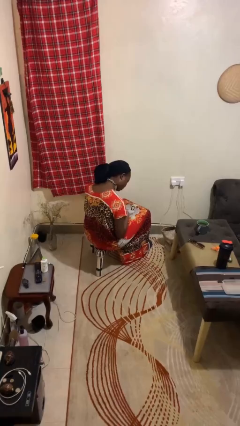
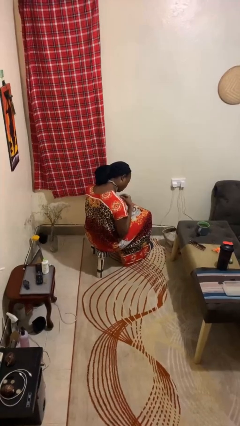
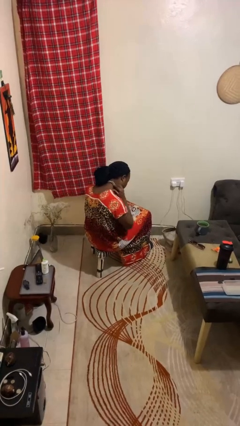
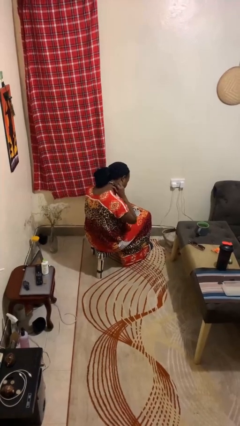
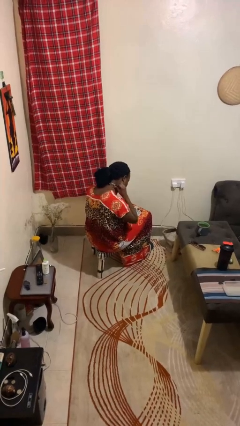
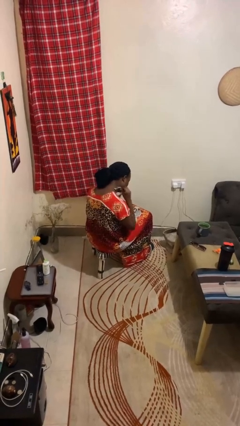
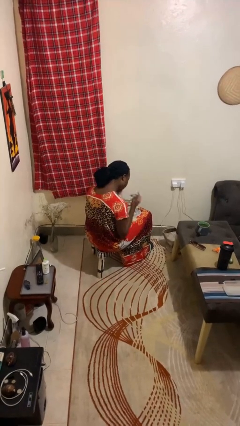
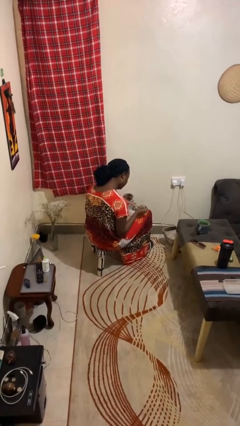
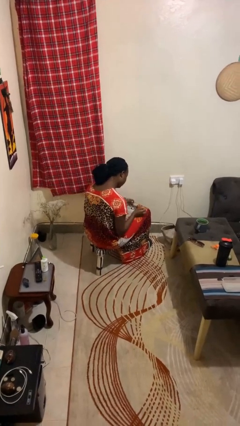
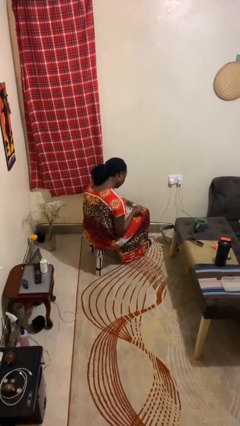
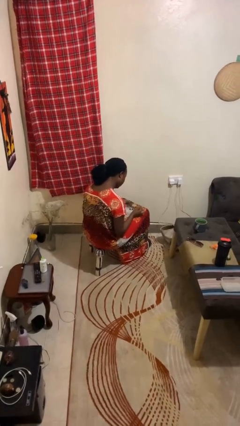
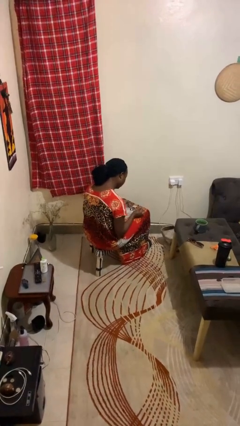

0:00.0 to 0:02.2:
person takes off necklace

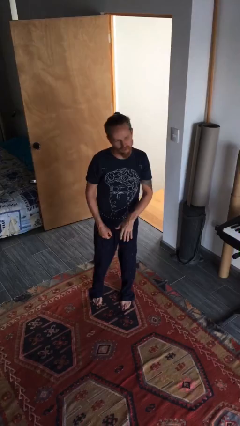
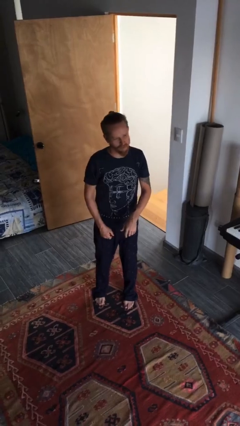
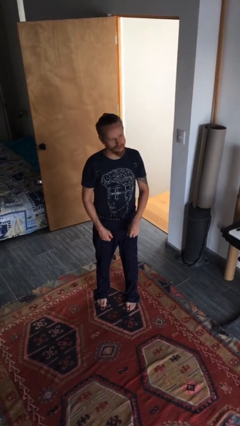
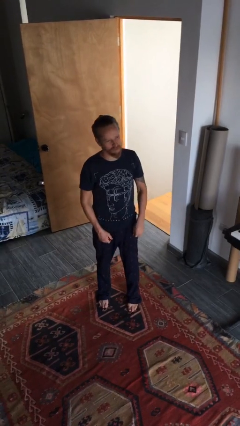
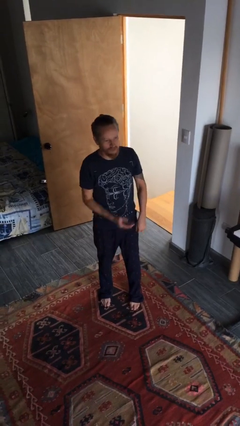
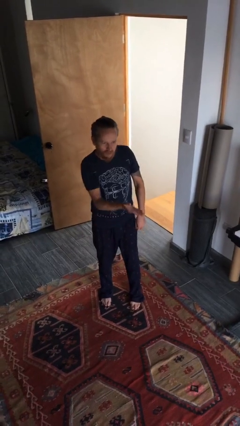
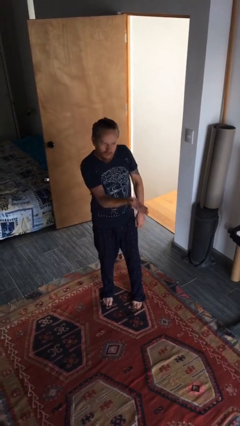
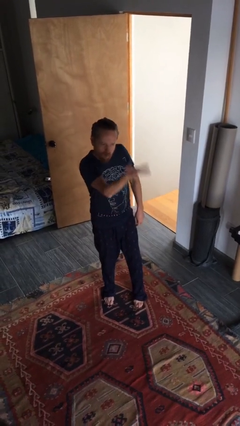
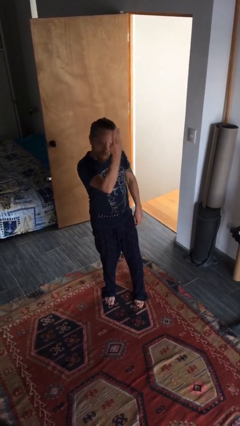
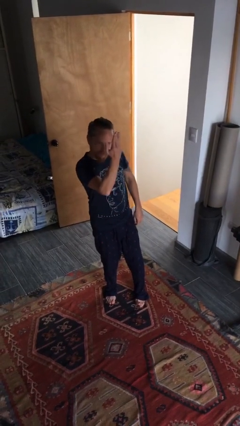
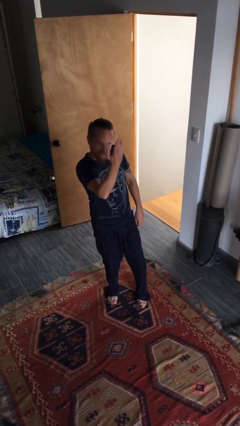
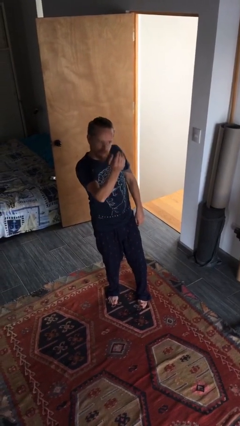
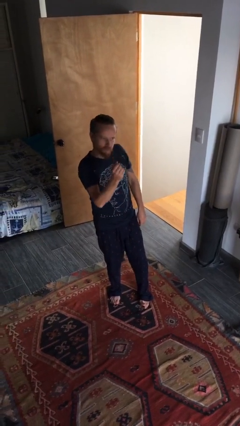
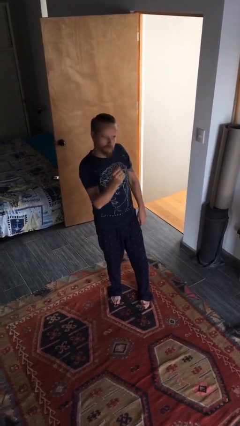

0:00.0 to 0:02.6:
person gestures swipe up

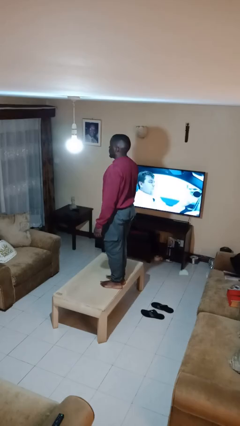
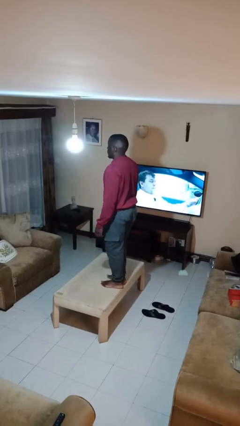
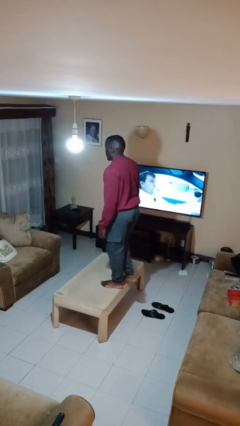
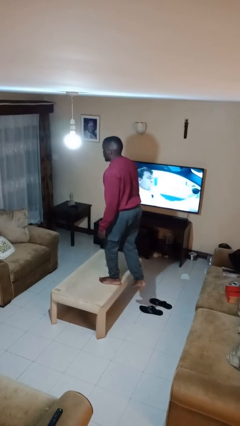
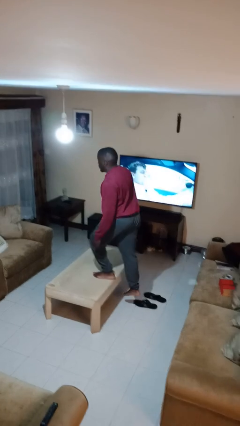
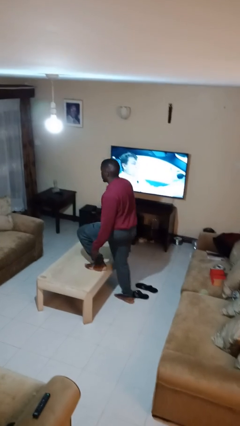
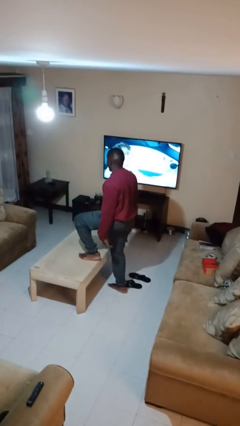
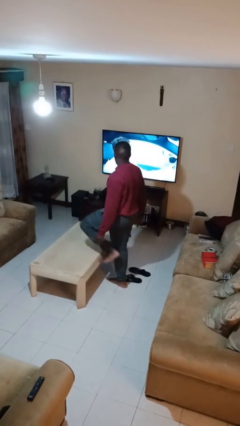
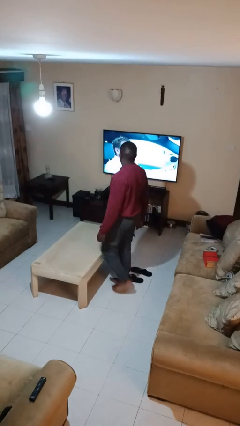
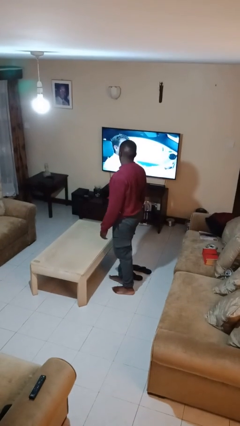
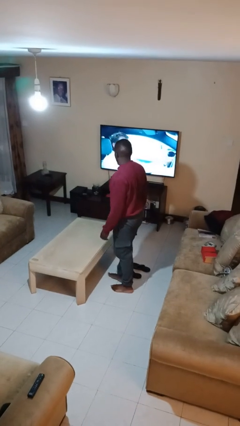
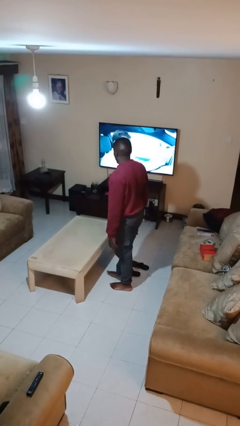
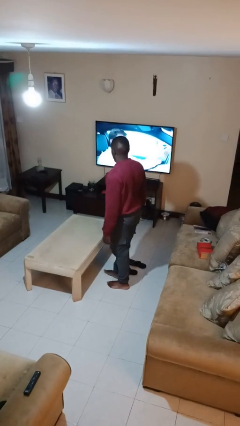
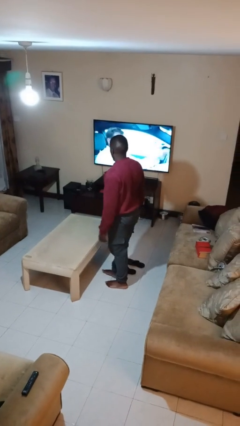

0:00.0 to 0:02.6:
person climbs off table

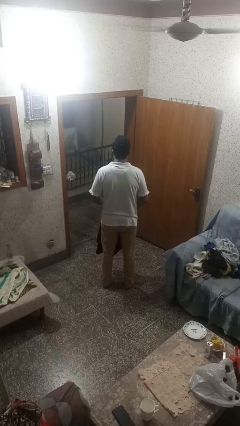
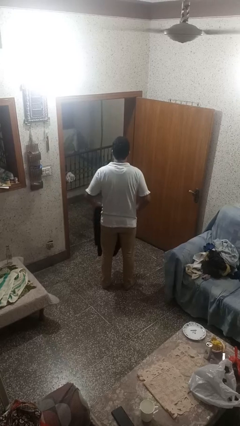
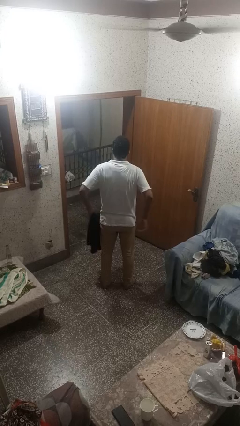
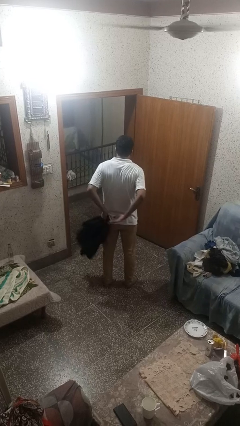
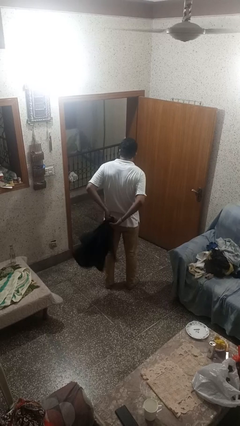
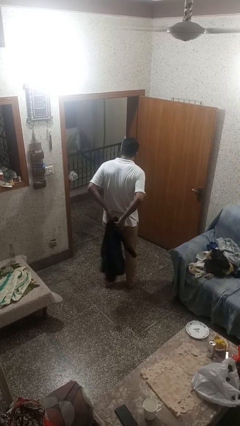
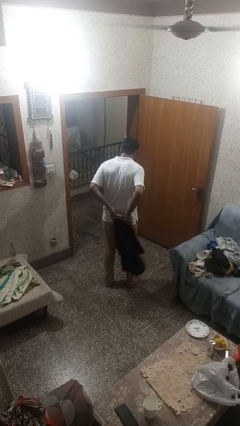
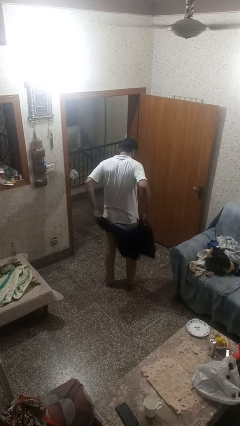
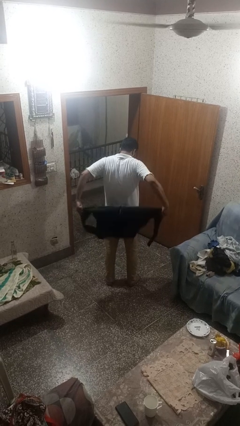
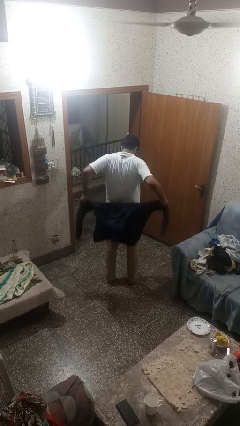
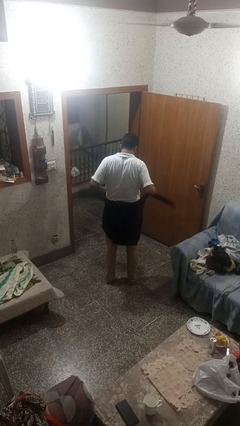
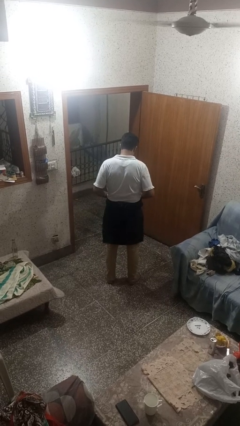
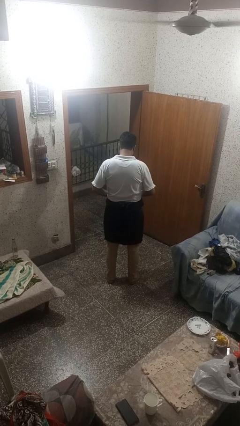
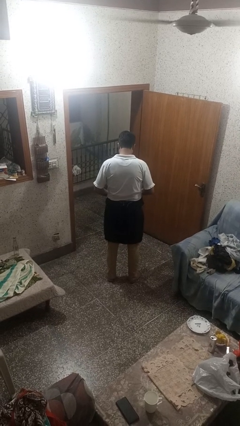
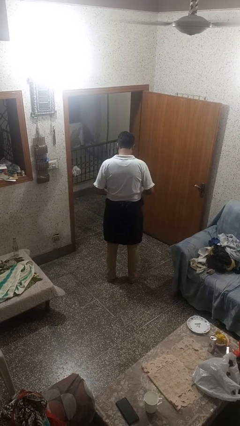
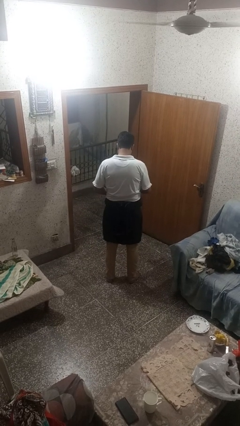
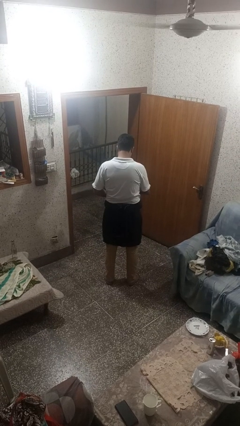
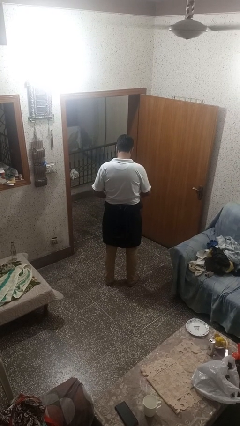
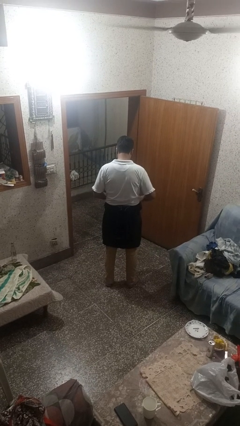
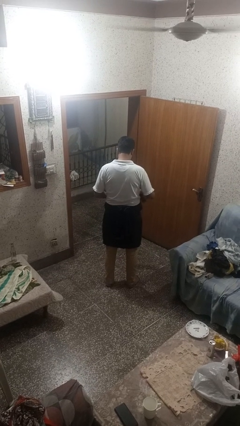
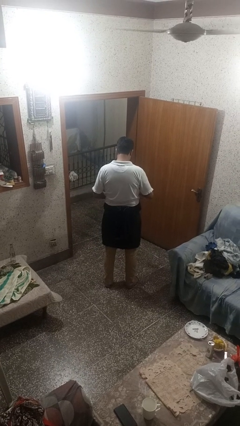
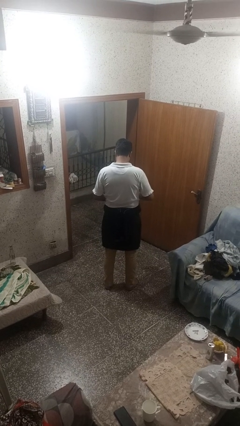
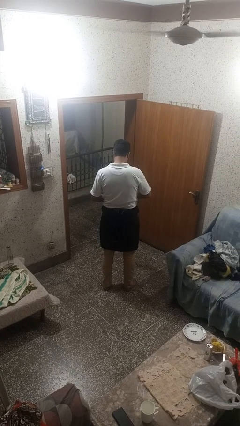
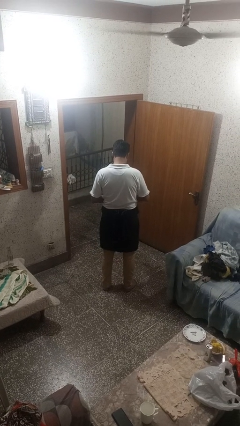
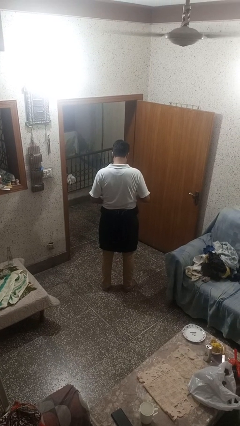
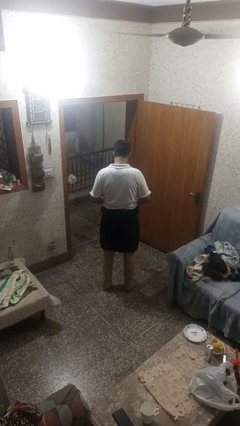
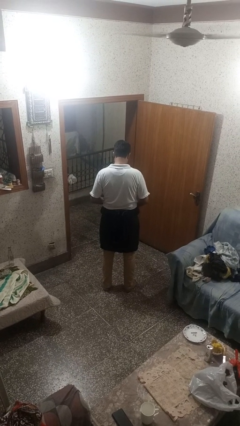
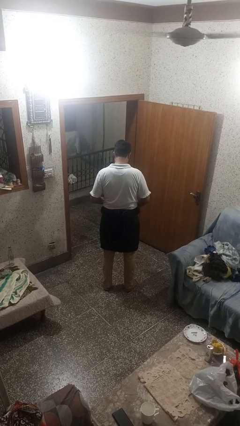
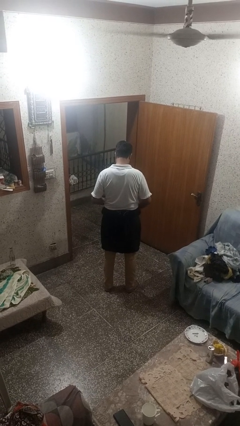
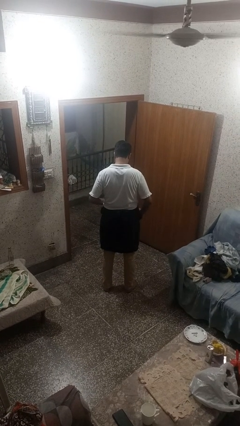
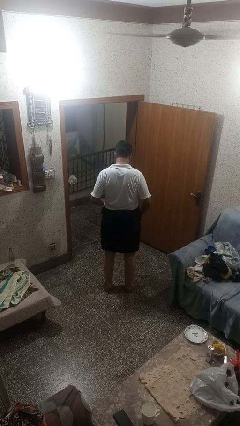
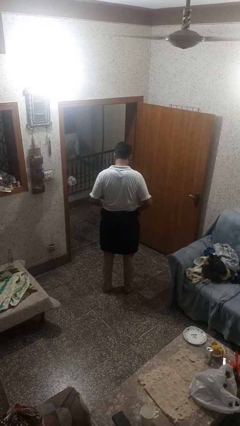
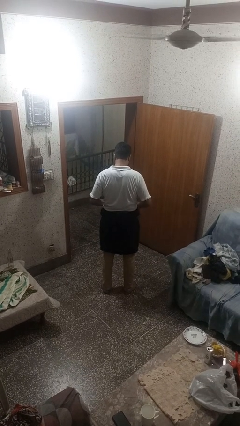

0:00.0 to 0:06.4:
person ties jacket around waist

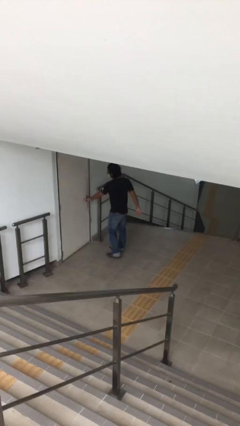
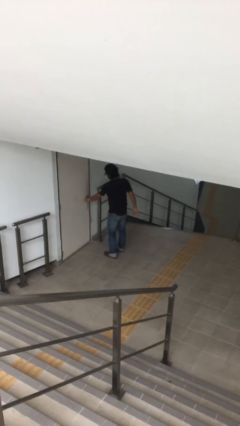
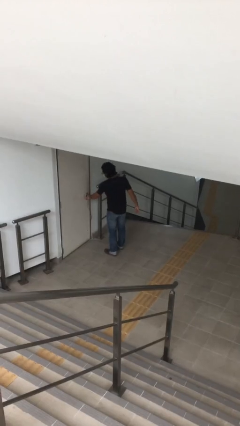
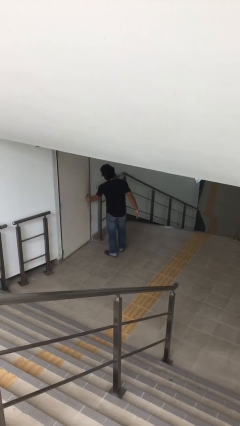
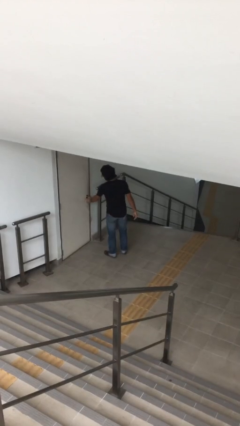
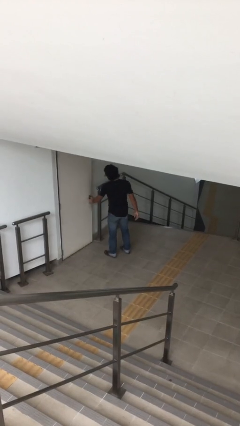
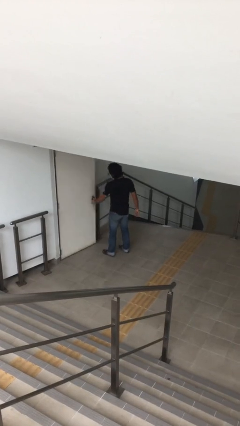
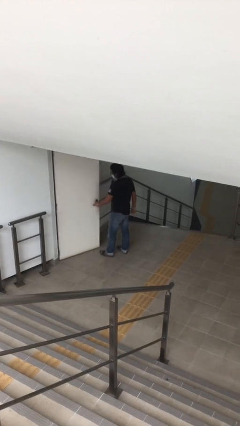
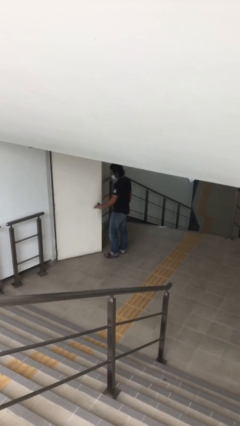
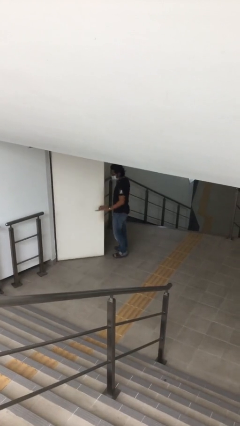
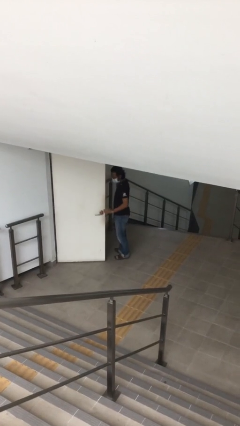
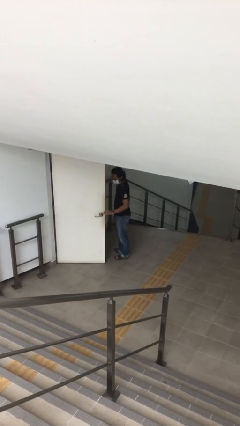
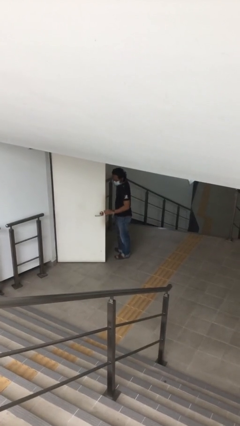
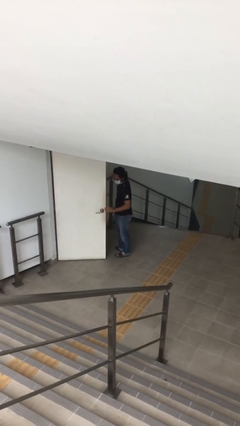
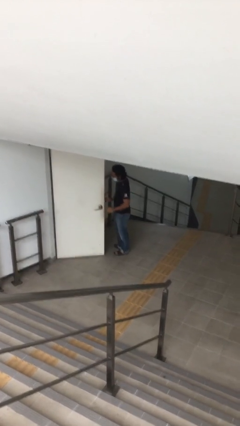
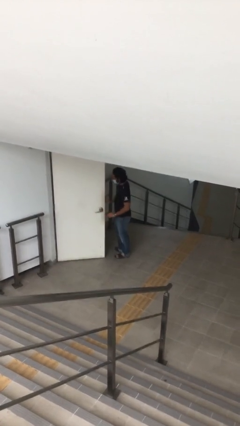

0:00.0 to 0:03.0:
person opens facility door

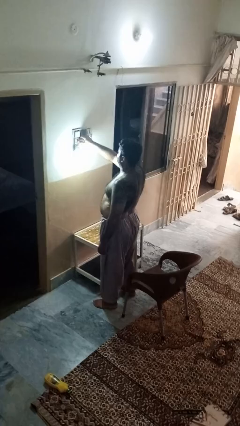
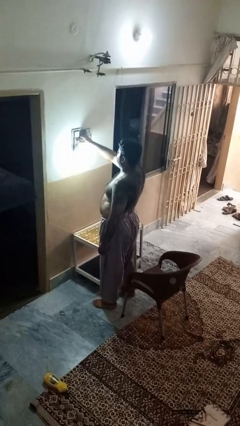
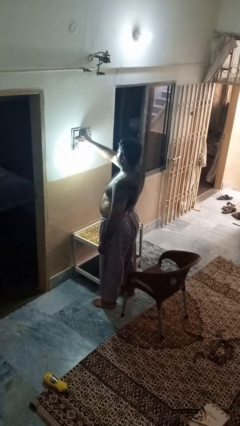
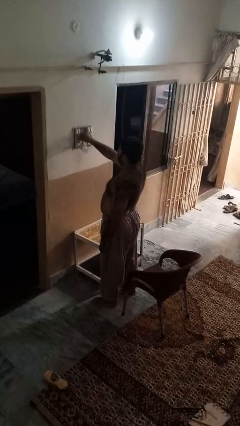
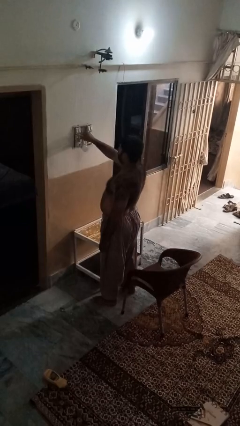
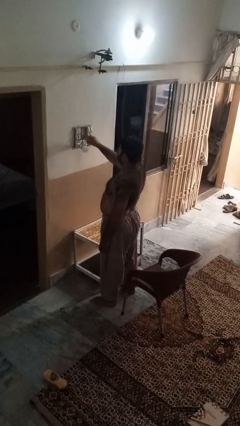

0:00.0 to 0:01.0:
person turns off lamp
